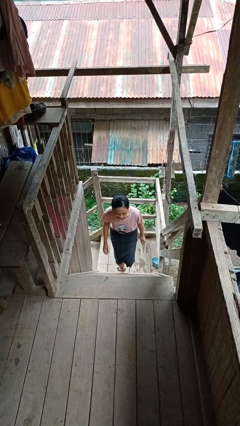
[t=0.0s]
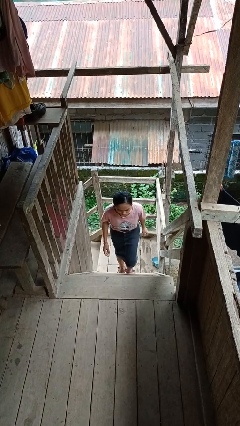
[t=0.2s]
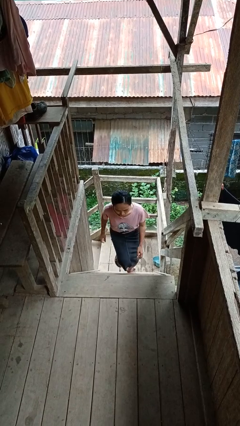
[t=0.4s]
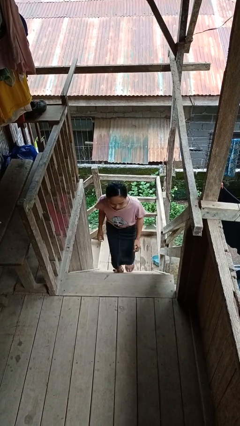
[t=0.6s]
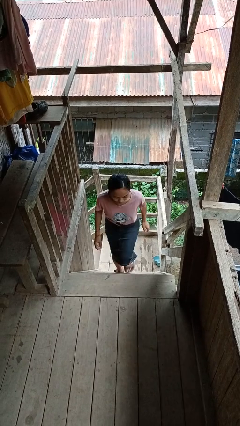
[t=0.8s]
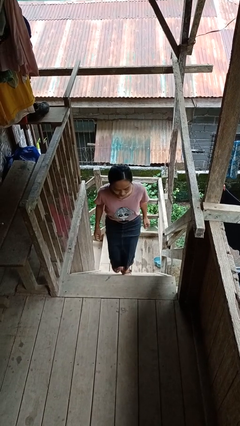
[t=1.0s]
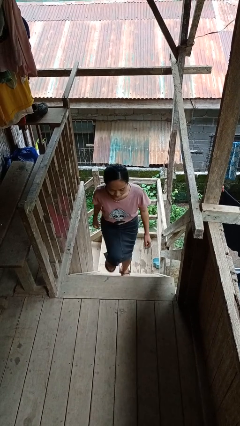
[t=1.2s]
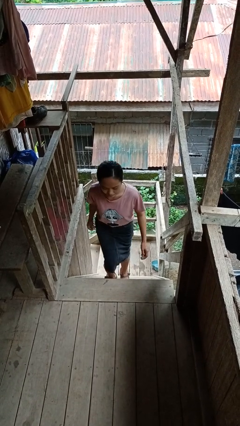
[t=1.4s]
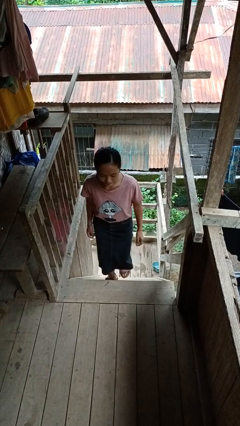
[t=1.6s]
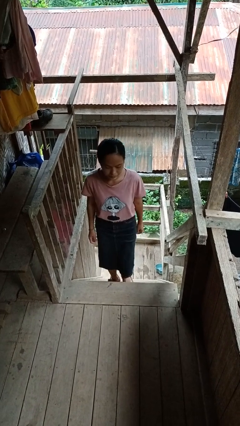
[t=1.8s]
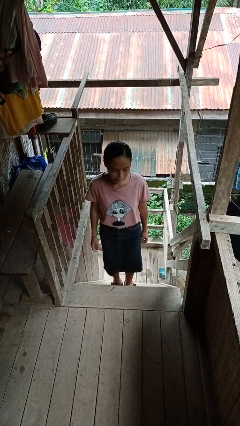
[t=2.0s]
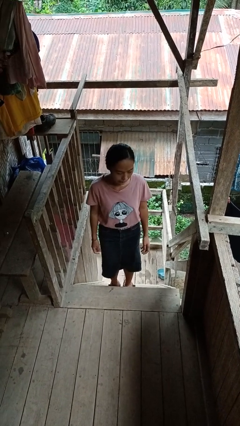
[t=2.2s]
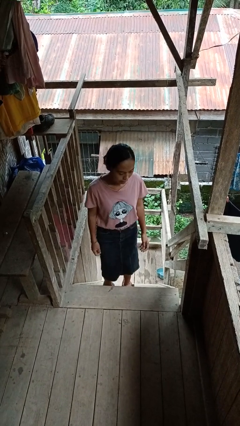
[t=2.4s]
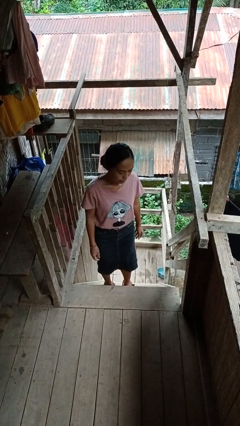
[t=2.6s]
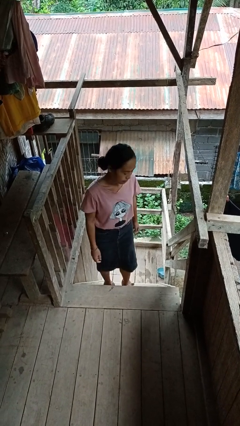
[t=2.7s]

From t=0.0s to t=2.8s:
person climbs up stairs

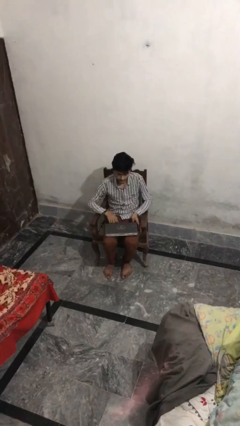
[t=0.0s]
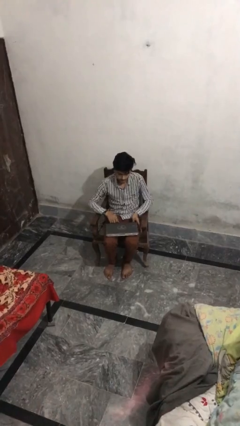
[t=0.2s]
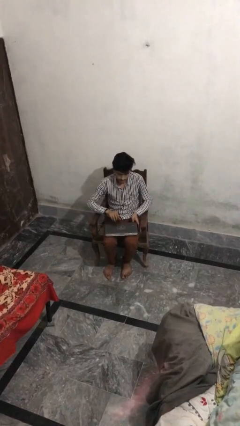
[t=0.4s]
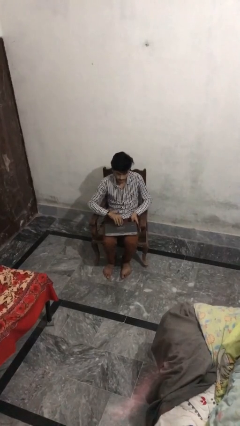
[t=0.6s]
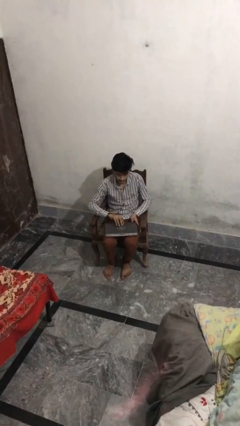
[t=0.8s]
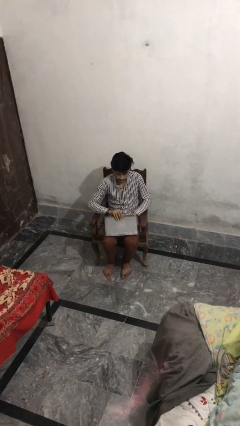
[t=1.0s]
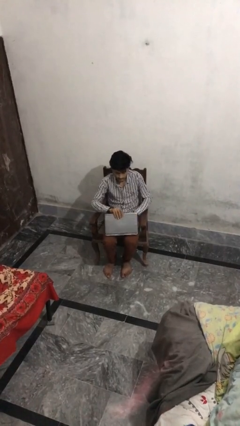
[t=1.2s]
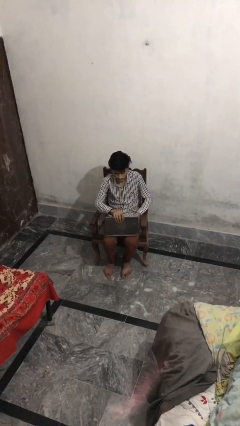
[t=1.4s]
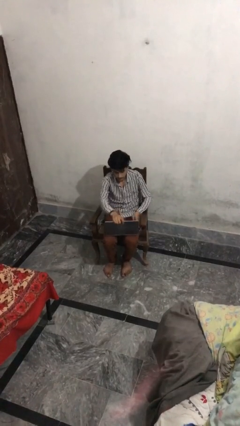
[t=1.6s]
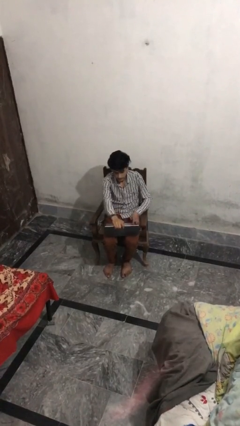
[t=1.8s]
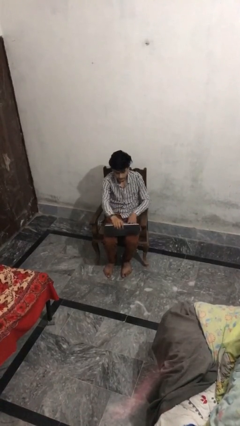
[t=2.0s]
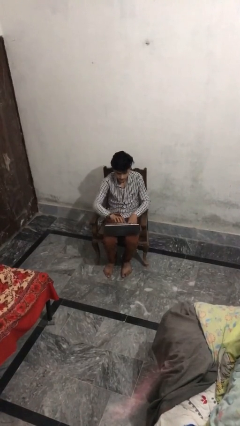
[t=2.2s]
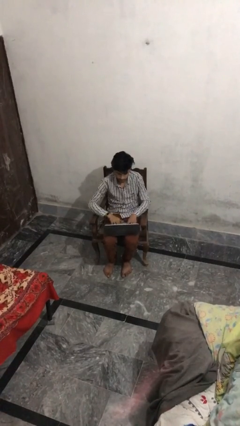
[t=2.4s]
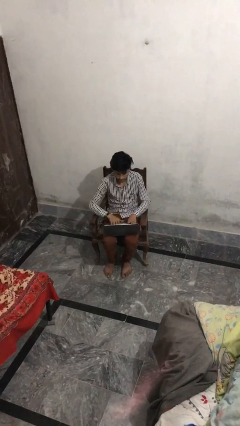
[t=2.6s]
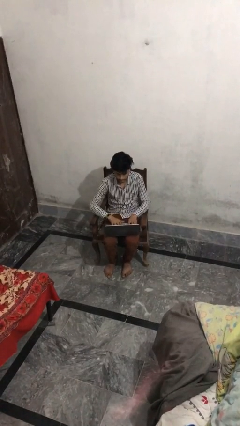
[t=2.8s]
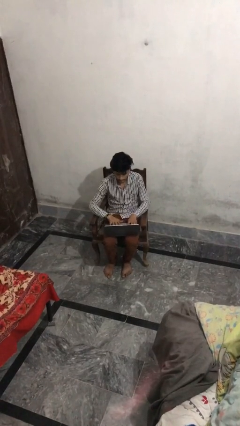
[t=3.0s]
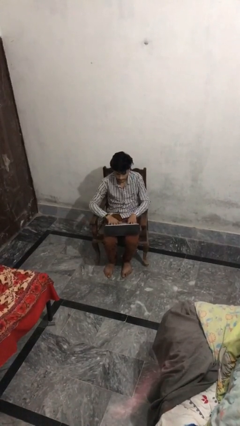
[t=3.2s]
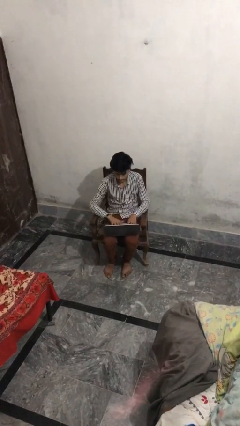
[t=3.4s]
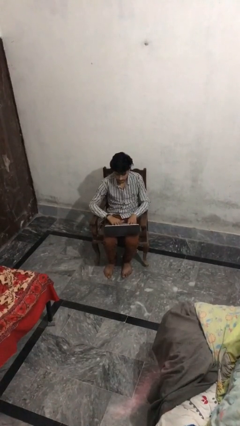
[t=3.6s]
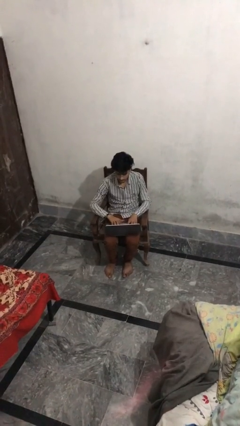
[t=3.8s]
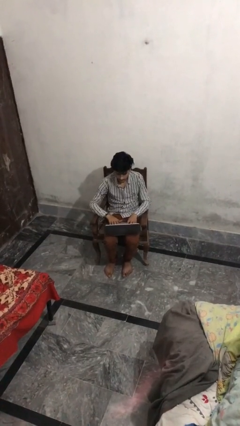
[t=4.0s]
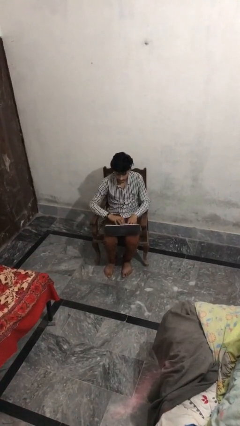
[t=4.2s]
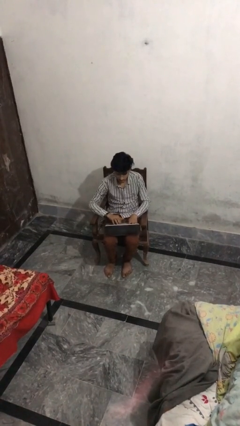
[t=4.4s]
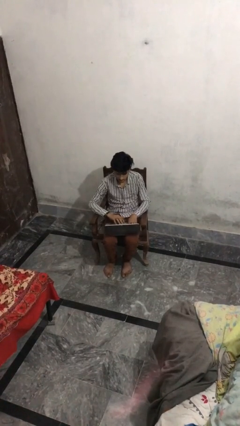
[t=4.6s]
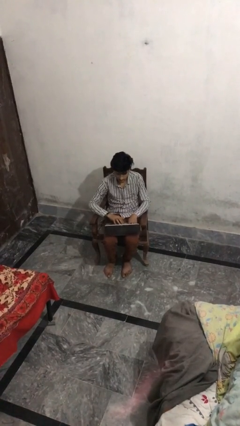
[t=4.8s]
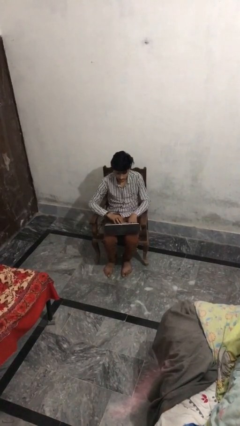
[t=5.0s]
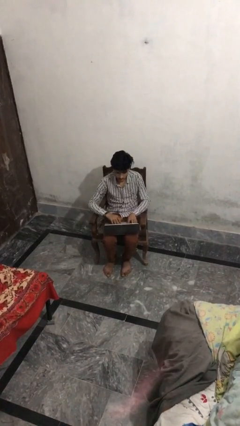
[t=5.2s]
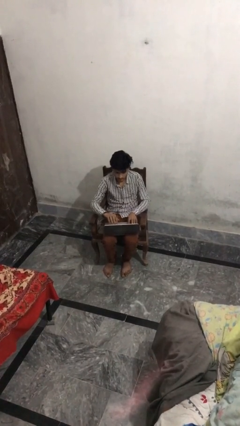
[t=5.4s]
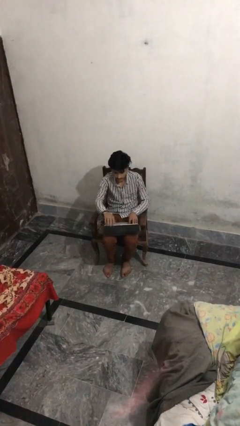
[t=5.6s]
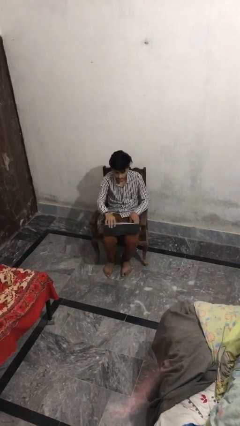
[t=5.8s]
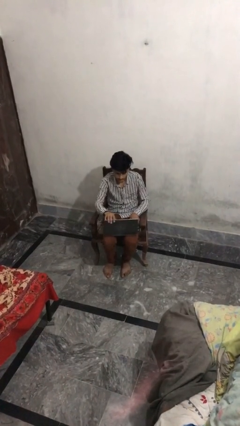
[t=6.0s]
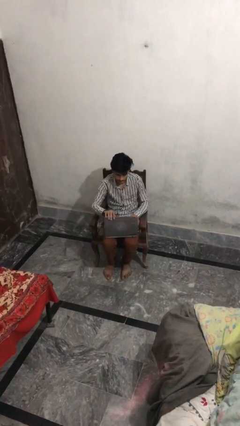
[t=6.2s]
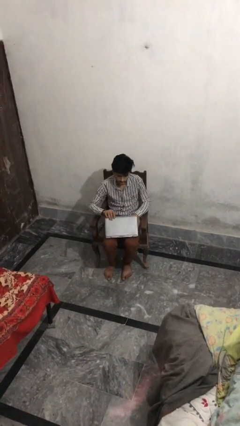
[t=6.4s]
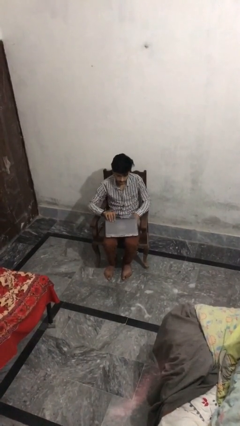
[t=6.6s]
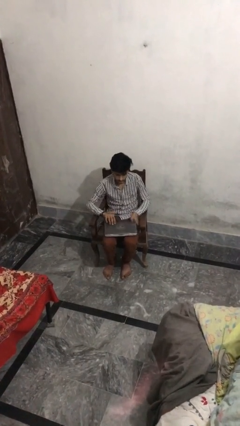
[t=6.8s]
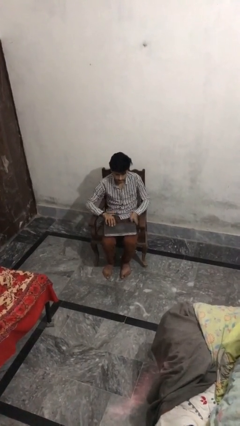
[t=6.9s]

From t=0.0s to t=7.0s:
person interacts with laptop

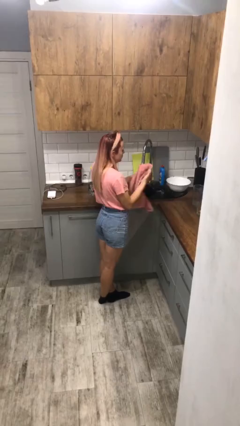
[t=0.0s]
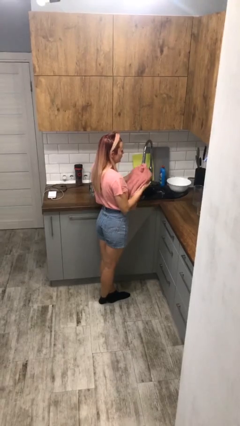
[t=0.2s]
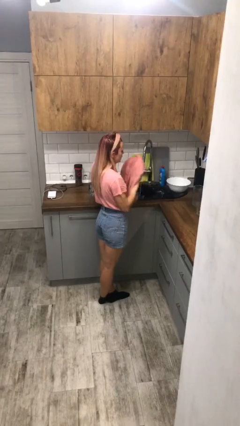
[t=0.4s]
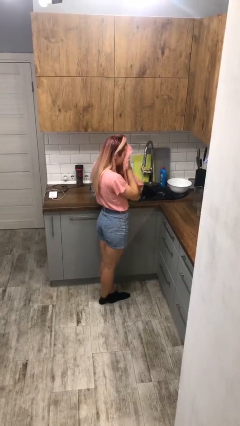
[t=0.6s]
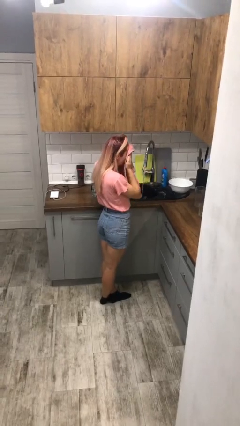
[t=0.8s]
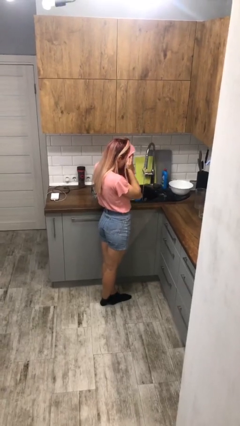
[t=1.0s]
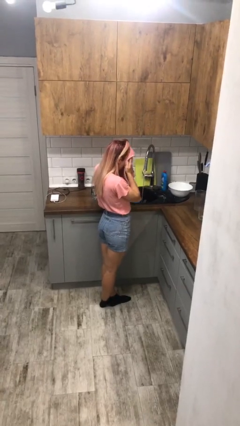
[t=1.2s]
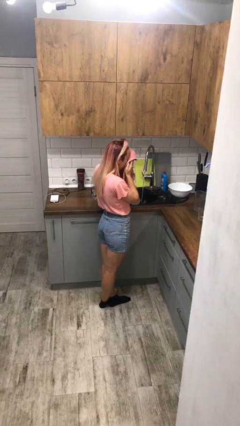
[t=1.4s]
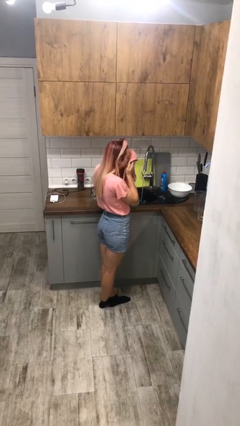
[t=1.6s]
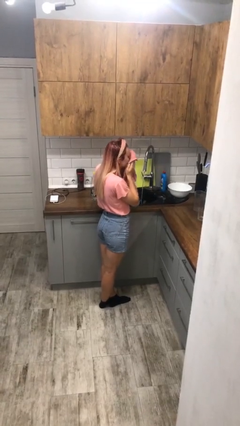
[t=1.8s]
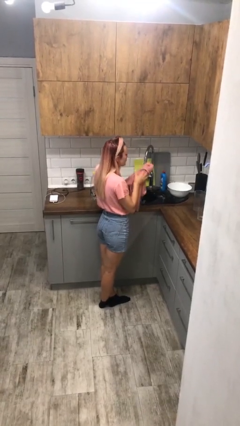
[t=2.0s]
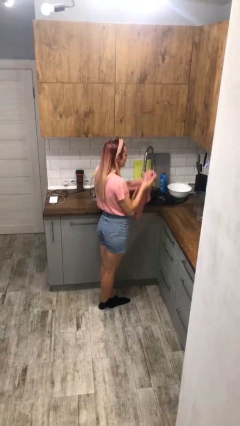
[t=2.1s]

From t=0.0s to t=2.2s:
person dries face with towel

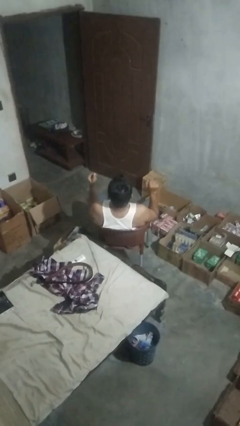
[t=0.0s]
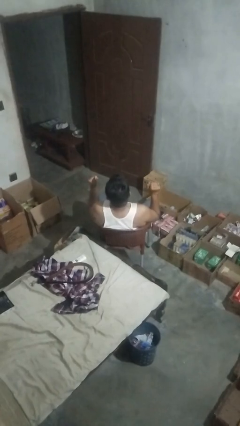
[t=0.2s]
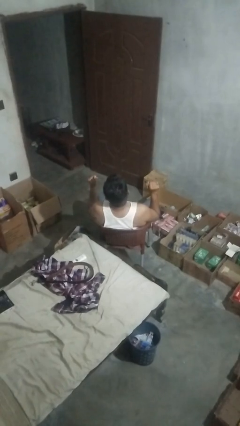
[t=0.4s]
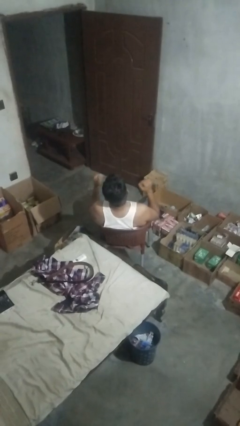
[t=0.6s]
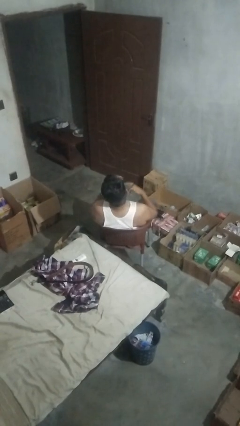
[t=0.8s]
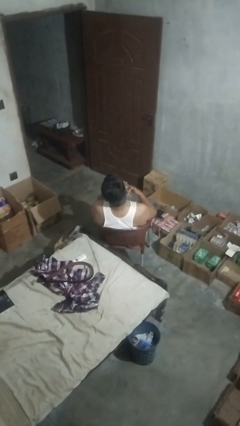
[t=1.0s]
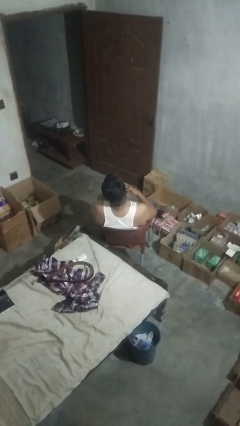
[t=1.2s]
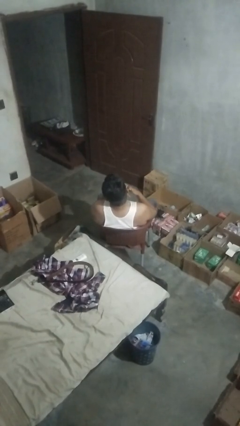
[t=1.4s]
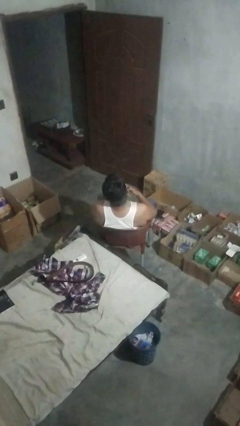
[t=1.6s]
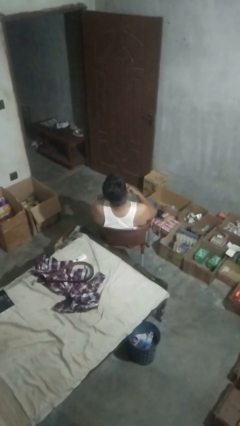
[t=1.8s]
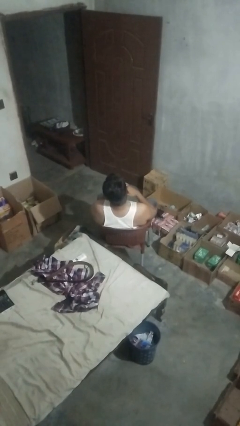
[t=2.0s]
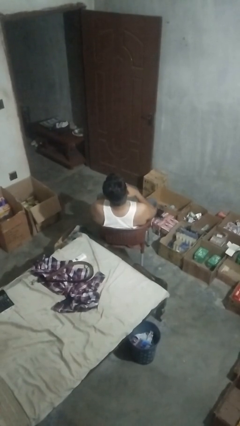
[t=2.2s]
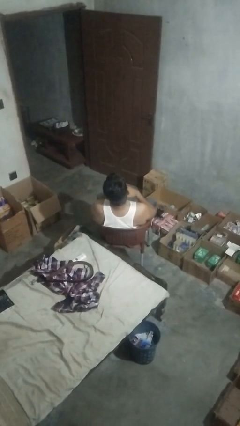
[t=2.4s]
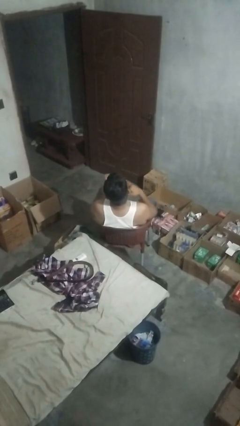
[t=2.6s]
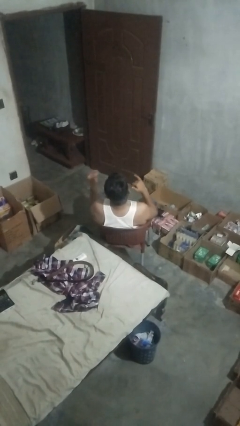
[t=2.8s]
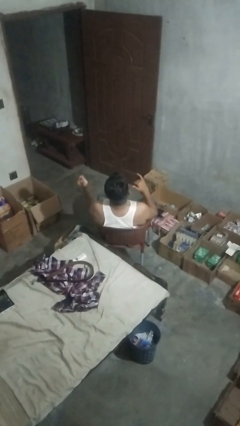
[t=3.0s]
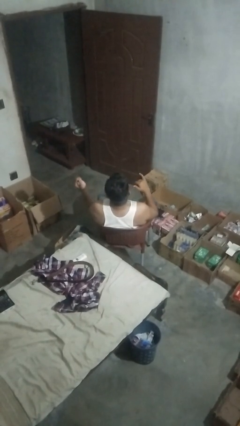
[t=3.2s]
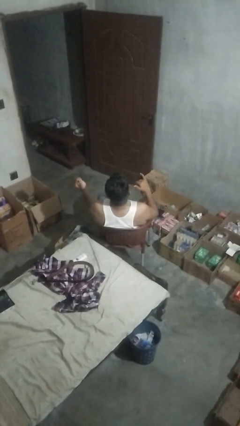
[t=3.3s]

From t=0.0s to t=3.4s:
person takes off ring

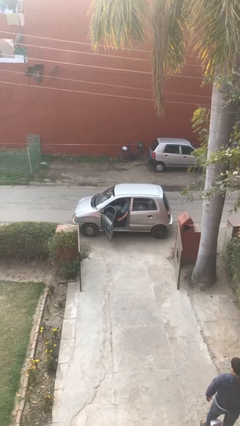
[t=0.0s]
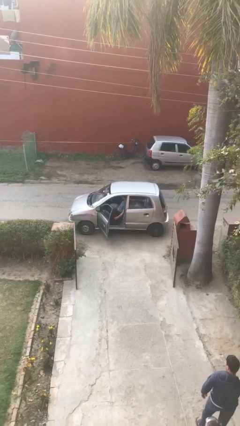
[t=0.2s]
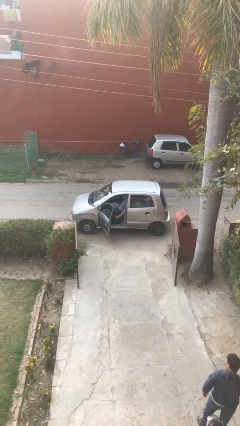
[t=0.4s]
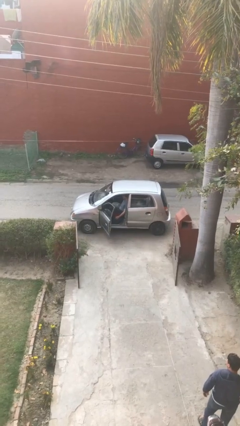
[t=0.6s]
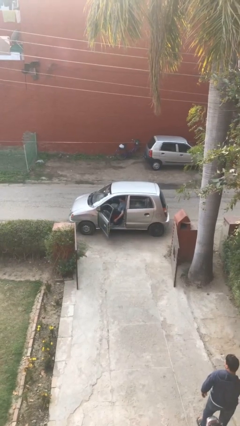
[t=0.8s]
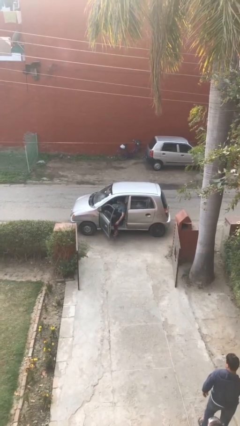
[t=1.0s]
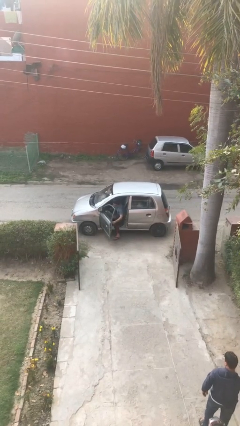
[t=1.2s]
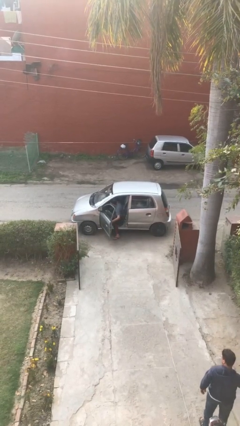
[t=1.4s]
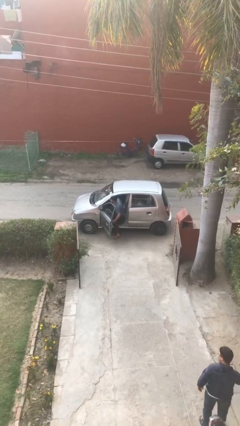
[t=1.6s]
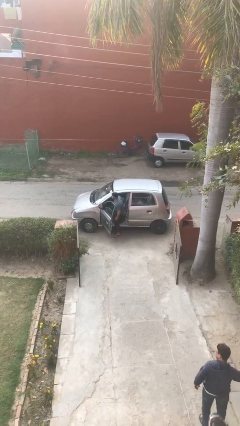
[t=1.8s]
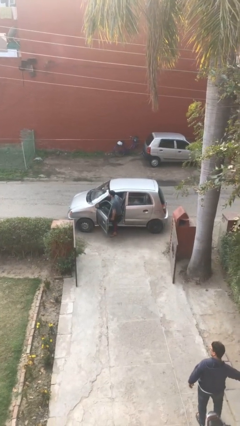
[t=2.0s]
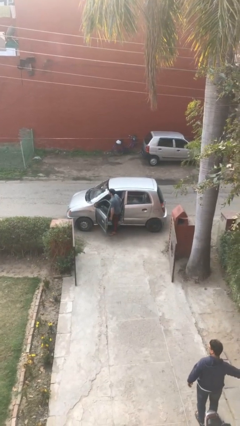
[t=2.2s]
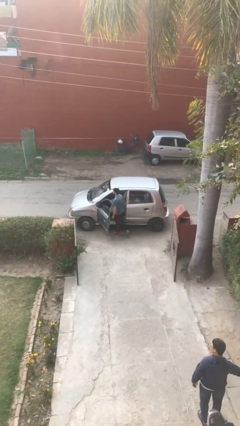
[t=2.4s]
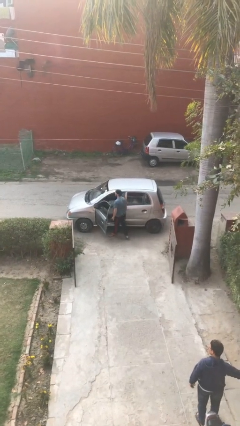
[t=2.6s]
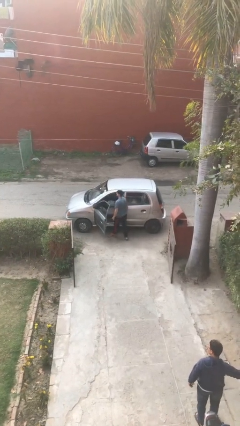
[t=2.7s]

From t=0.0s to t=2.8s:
person exits car
